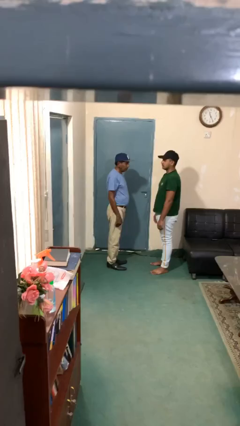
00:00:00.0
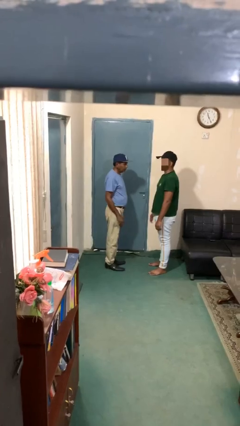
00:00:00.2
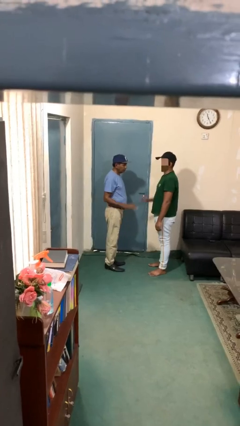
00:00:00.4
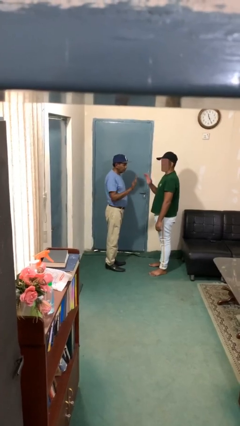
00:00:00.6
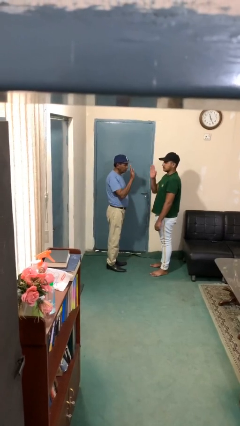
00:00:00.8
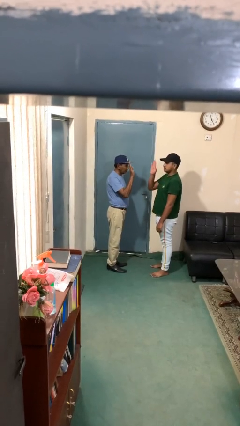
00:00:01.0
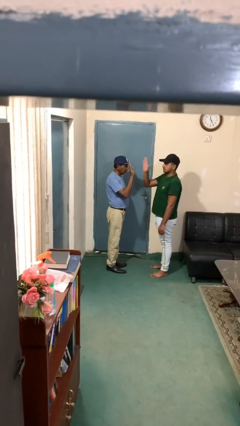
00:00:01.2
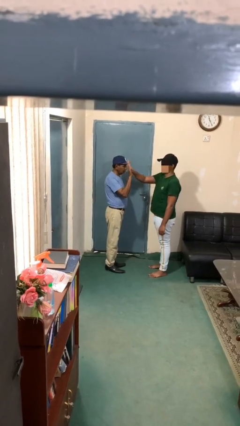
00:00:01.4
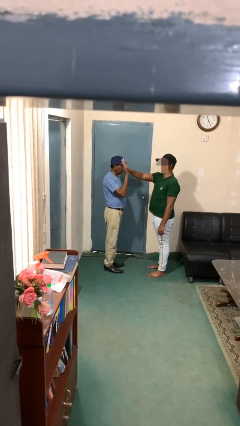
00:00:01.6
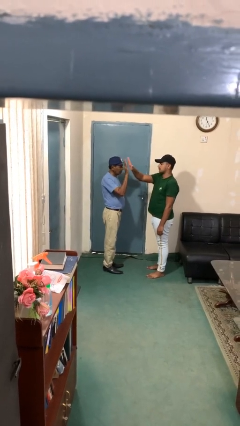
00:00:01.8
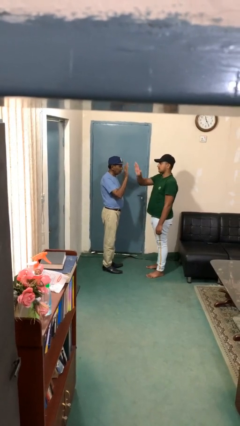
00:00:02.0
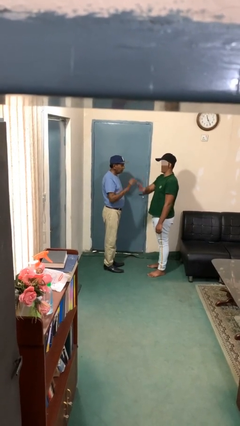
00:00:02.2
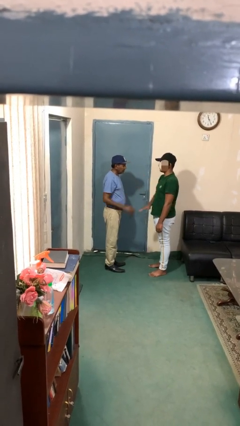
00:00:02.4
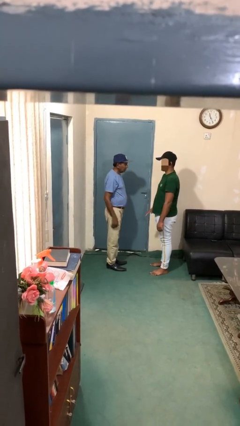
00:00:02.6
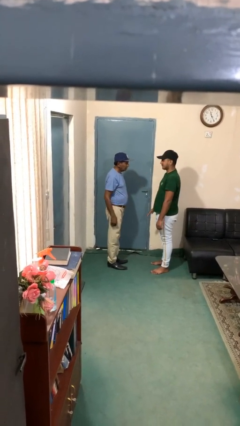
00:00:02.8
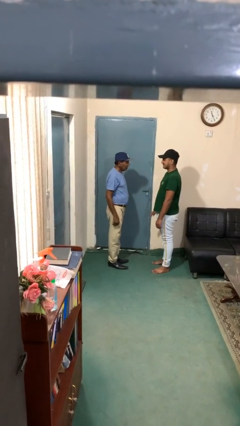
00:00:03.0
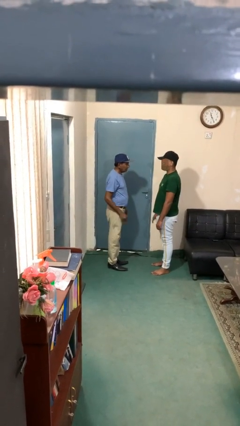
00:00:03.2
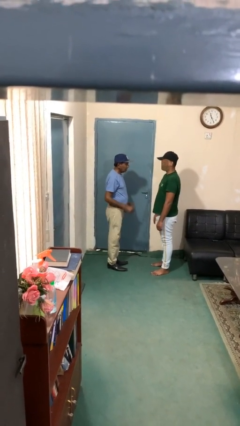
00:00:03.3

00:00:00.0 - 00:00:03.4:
person highfives hand

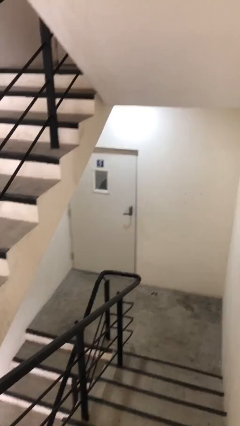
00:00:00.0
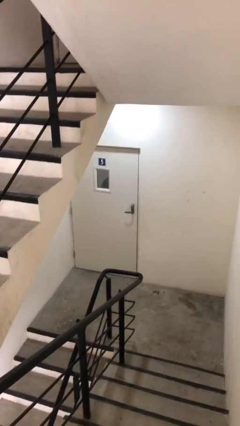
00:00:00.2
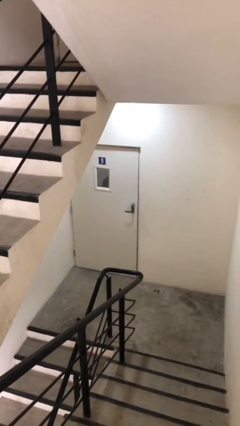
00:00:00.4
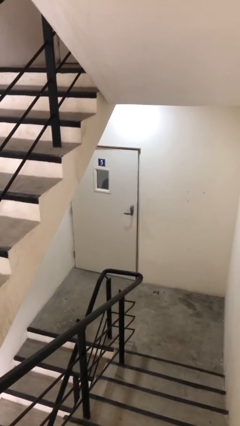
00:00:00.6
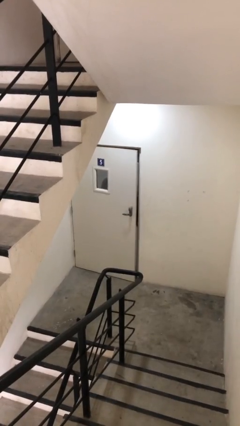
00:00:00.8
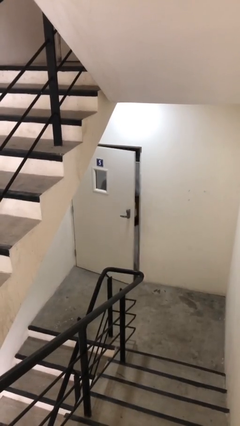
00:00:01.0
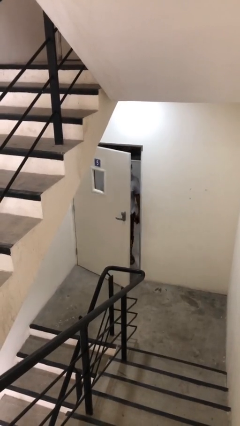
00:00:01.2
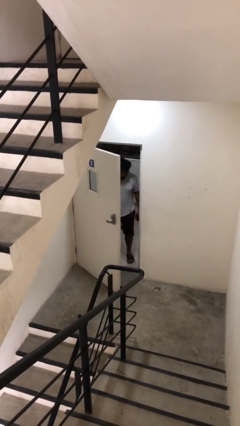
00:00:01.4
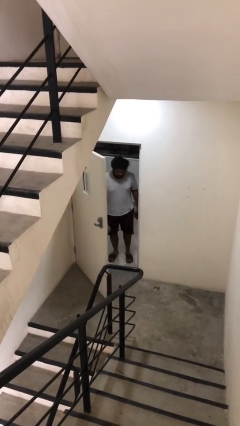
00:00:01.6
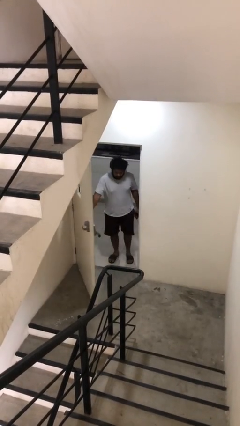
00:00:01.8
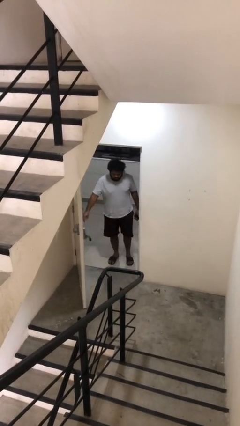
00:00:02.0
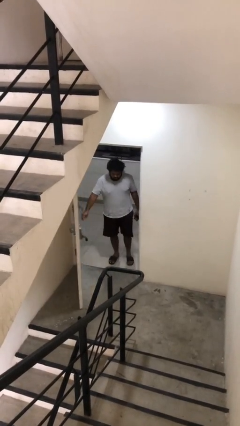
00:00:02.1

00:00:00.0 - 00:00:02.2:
person opens facility door

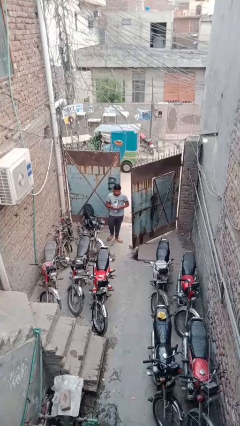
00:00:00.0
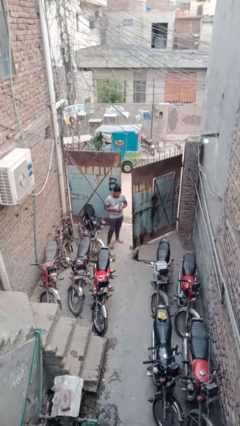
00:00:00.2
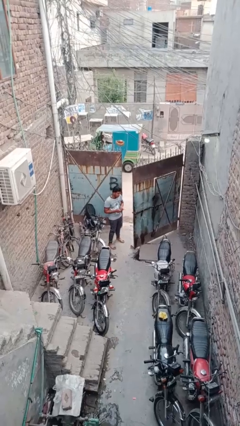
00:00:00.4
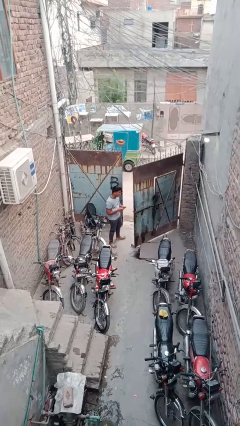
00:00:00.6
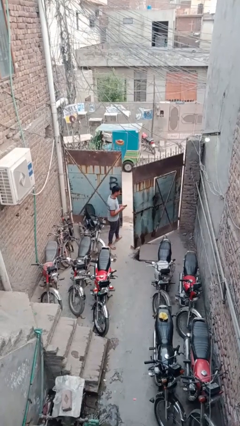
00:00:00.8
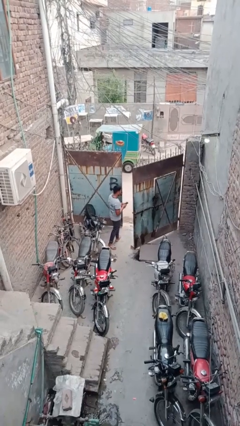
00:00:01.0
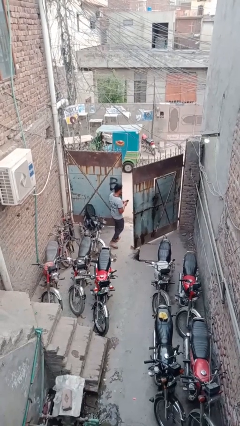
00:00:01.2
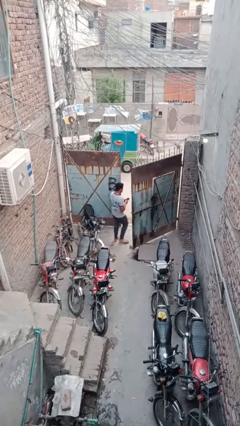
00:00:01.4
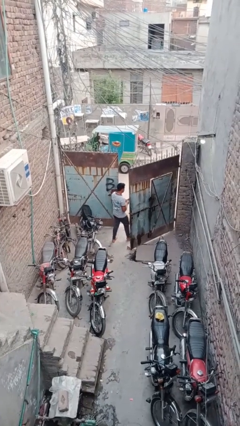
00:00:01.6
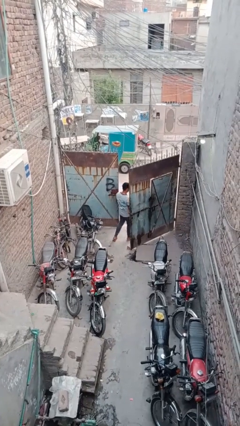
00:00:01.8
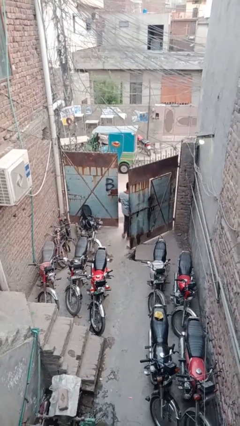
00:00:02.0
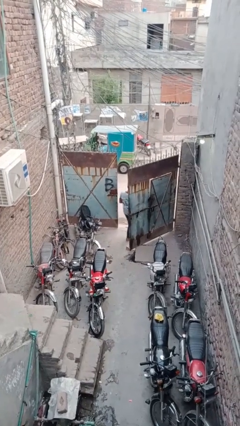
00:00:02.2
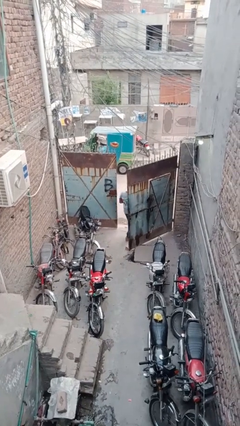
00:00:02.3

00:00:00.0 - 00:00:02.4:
person exits scene through structure

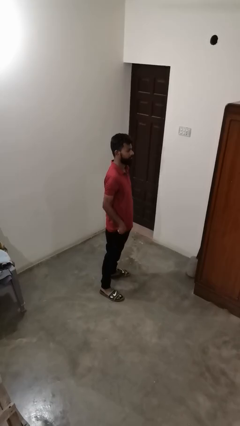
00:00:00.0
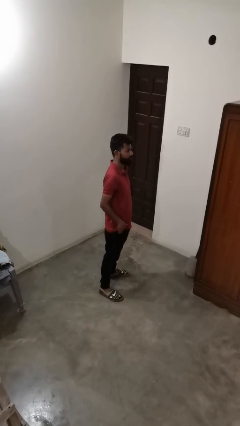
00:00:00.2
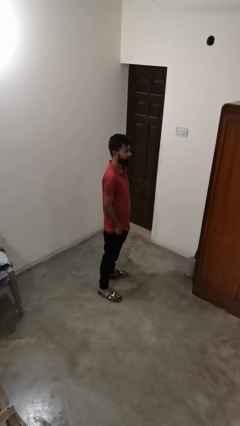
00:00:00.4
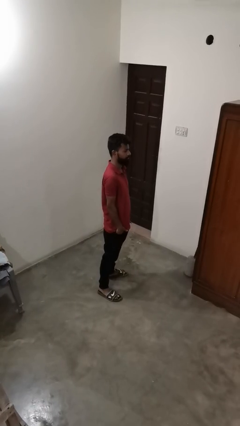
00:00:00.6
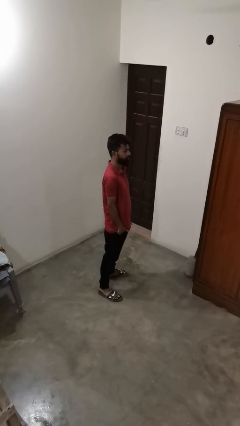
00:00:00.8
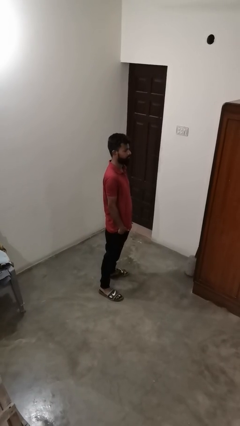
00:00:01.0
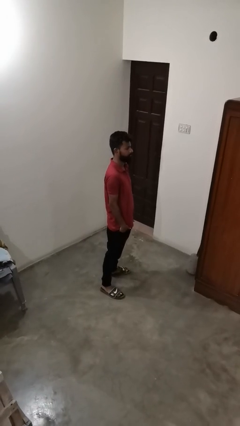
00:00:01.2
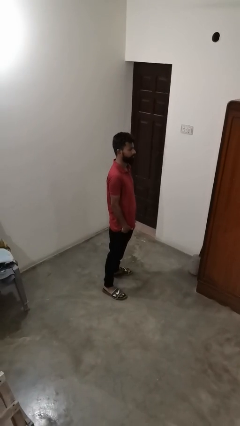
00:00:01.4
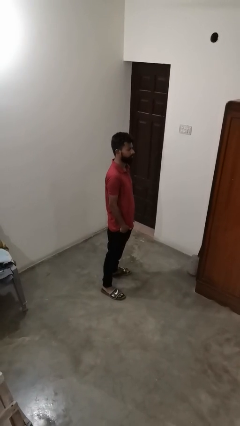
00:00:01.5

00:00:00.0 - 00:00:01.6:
person puts hands in back pockets

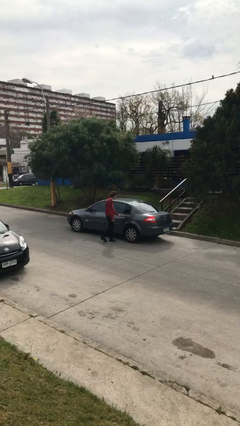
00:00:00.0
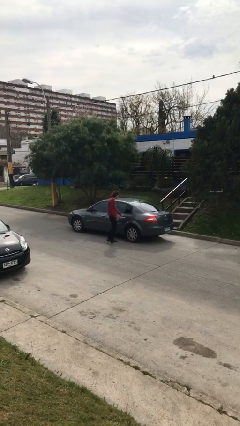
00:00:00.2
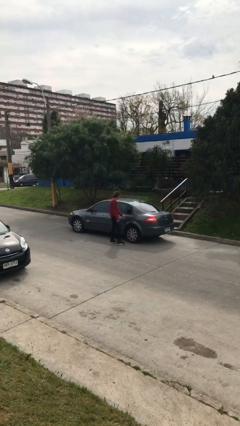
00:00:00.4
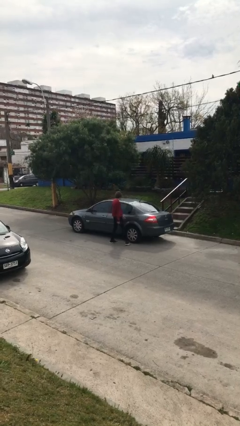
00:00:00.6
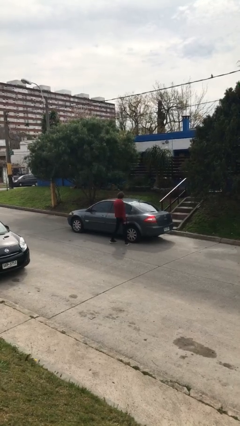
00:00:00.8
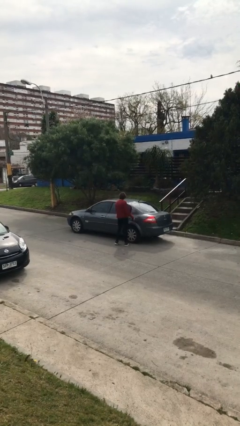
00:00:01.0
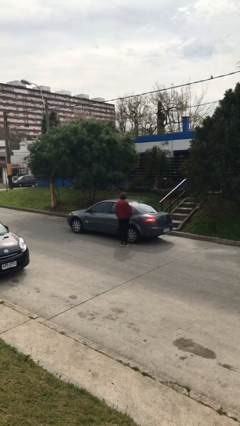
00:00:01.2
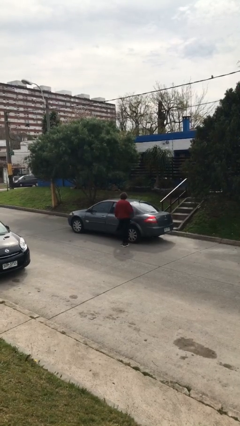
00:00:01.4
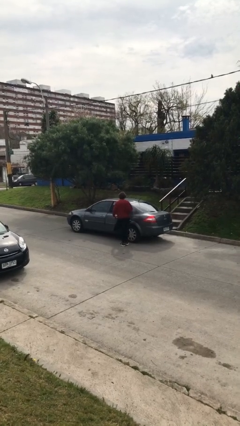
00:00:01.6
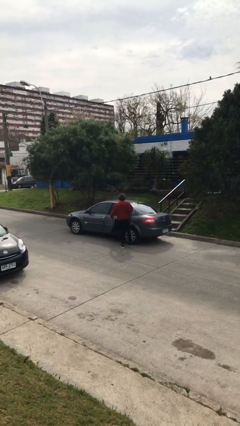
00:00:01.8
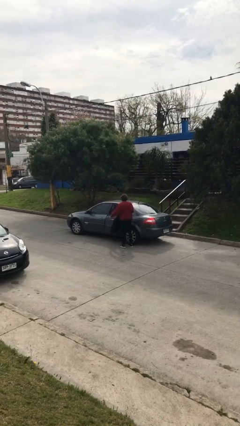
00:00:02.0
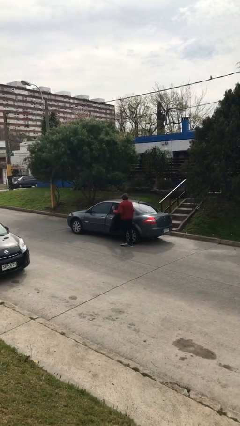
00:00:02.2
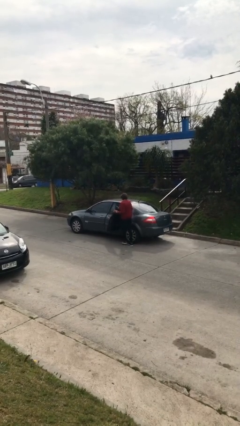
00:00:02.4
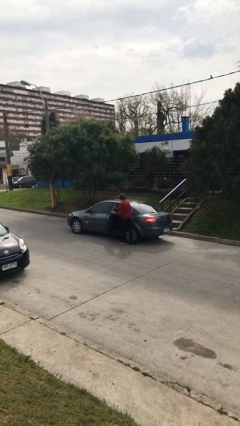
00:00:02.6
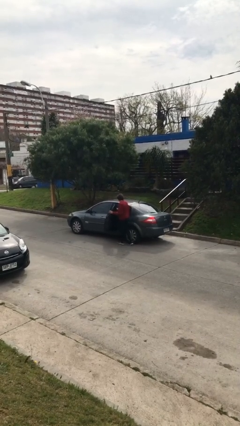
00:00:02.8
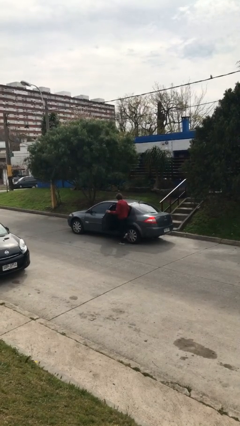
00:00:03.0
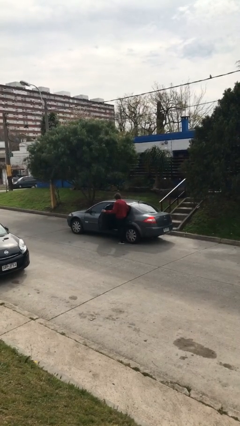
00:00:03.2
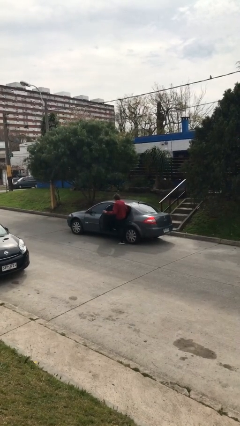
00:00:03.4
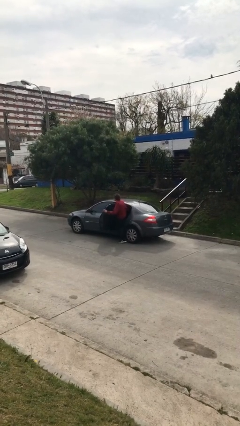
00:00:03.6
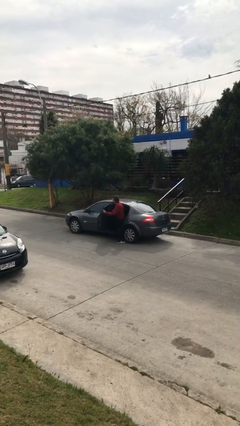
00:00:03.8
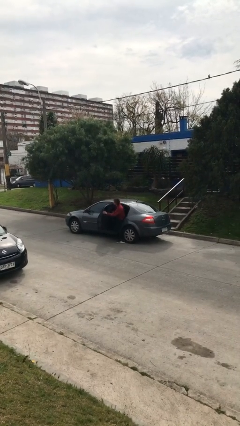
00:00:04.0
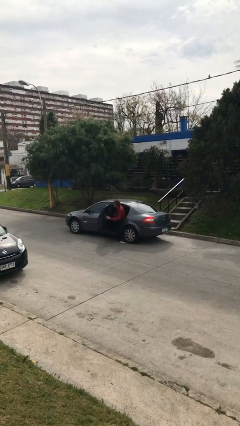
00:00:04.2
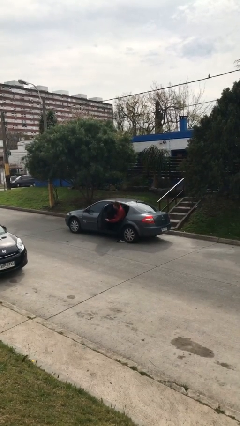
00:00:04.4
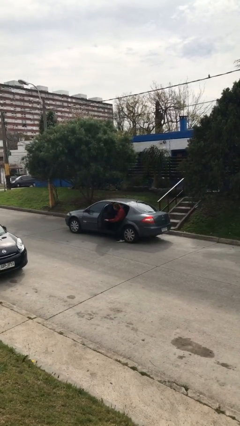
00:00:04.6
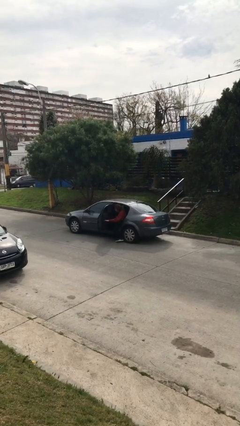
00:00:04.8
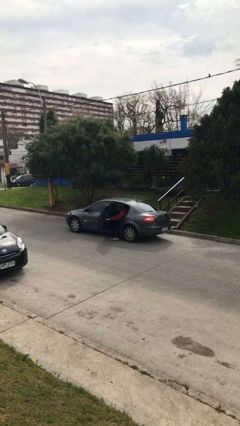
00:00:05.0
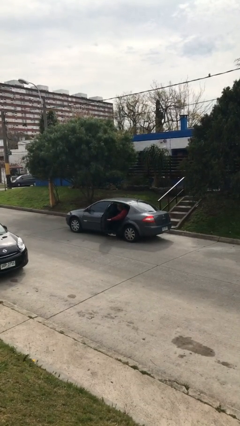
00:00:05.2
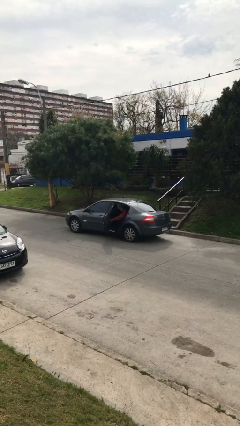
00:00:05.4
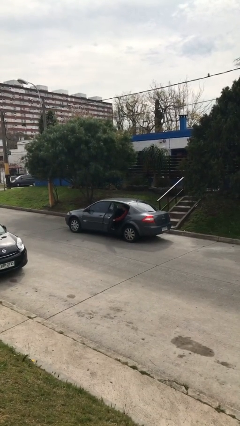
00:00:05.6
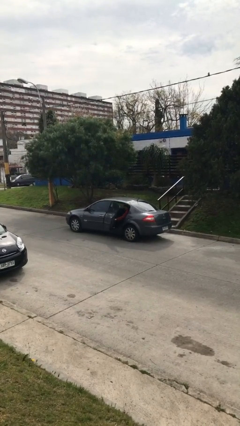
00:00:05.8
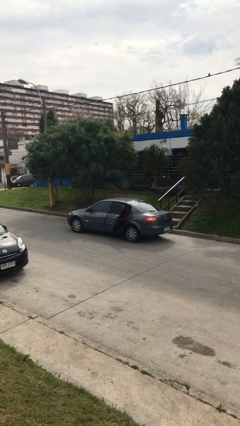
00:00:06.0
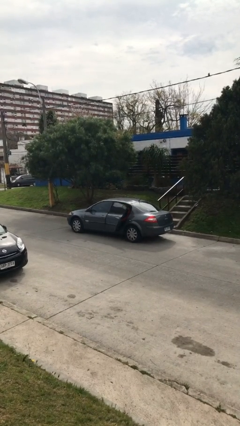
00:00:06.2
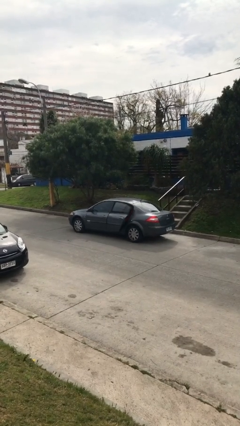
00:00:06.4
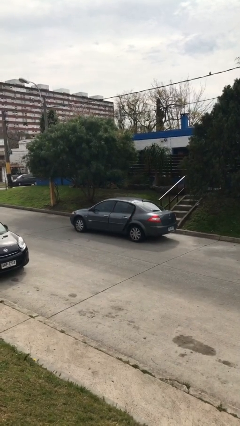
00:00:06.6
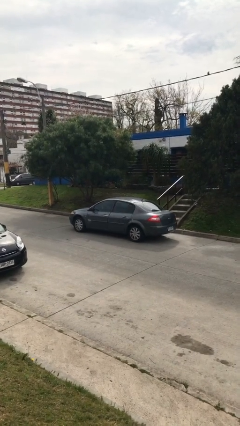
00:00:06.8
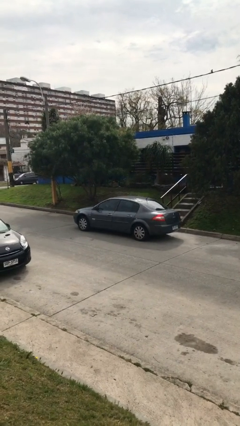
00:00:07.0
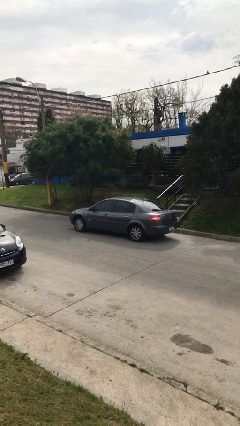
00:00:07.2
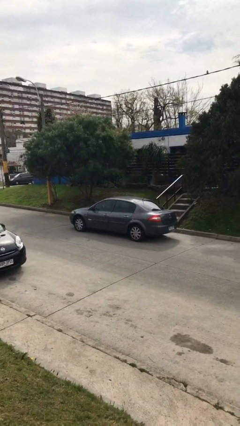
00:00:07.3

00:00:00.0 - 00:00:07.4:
car picks up person

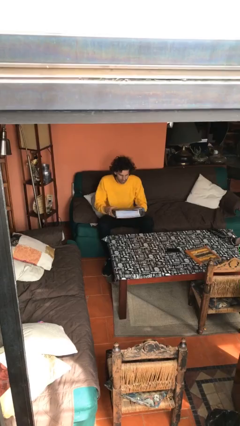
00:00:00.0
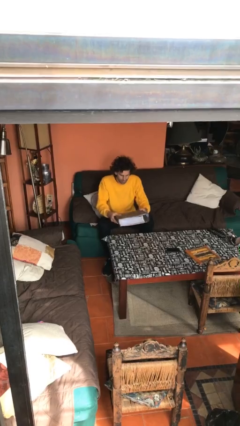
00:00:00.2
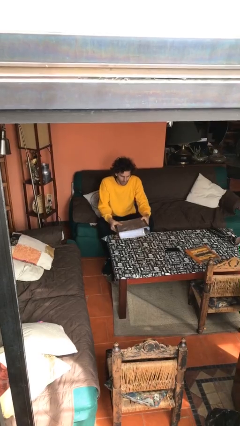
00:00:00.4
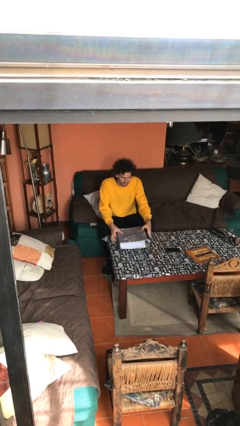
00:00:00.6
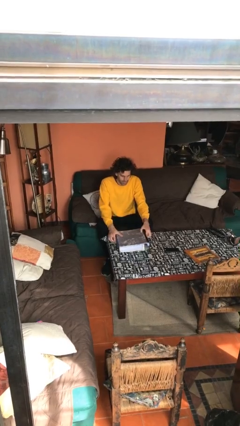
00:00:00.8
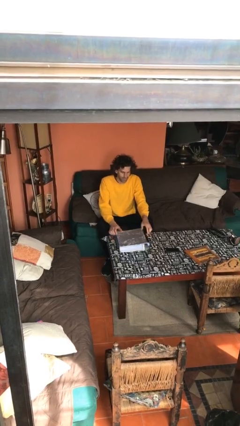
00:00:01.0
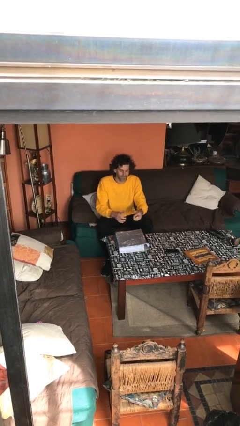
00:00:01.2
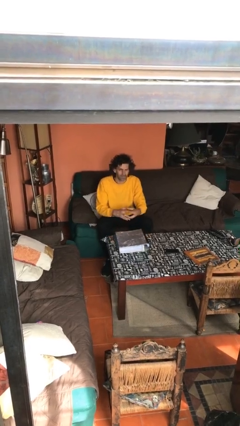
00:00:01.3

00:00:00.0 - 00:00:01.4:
person puts down object on table
